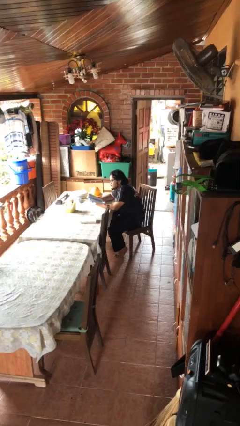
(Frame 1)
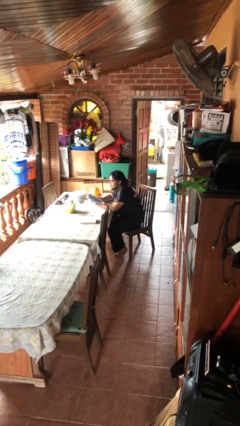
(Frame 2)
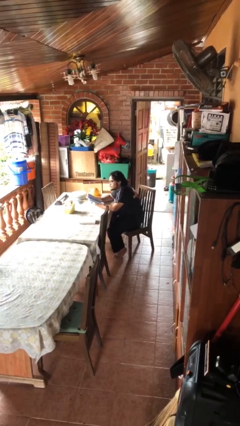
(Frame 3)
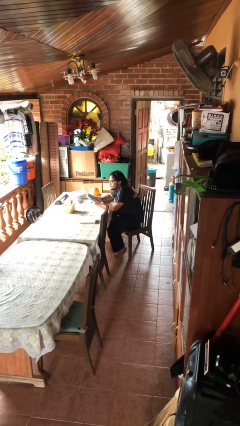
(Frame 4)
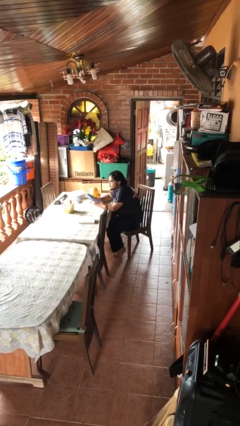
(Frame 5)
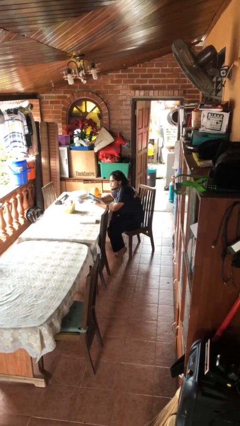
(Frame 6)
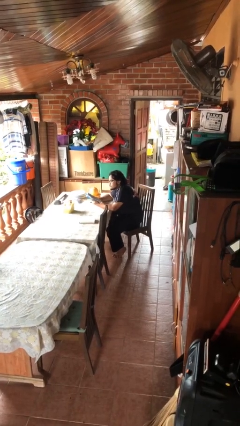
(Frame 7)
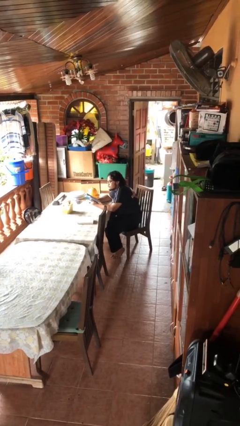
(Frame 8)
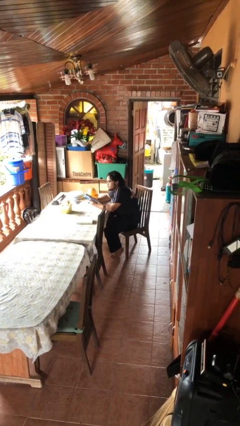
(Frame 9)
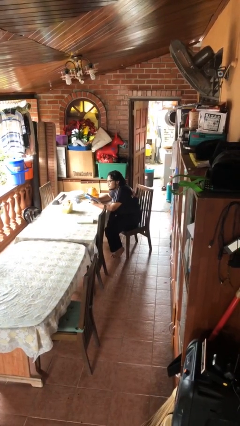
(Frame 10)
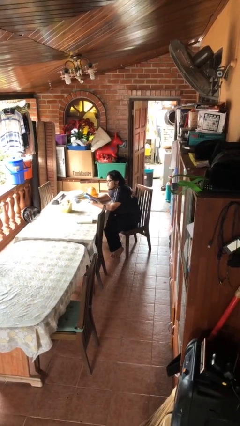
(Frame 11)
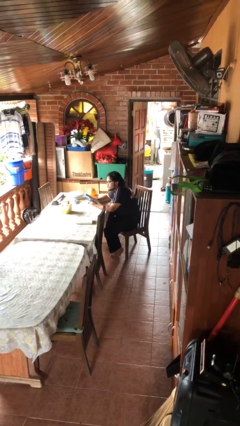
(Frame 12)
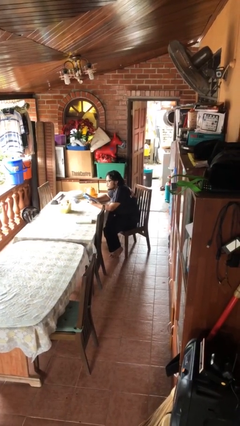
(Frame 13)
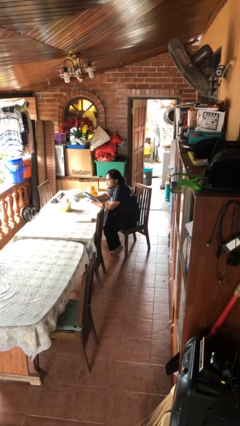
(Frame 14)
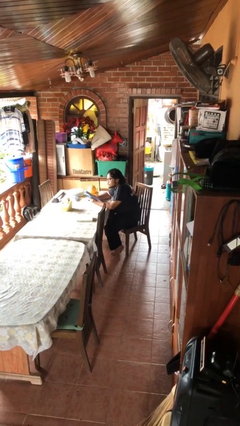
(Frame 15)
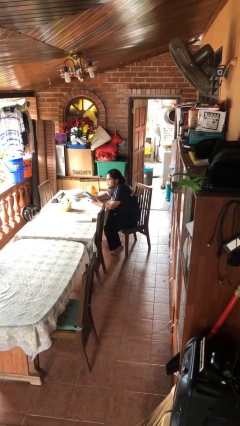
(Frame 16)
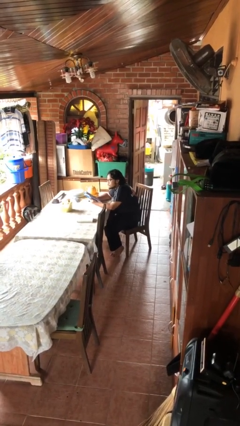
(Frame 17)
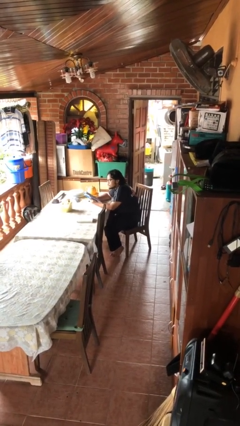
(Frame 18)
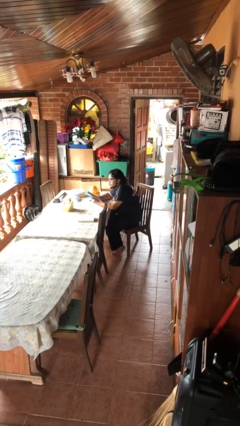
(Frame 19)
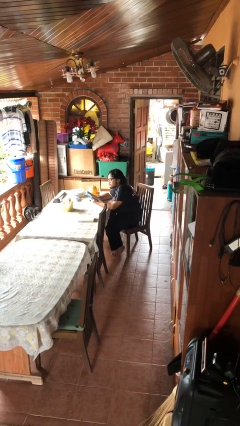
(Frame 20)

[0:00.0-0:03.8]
person reads document

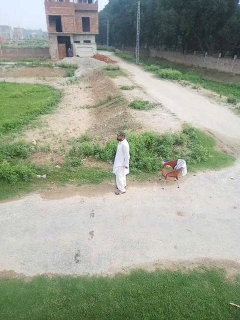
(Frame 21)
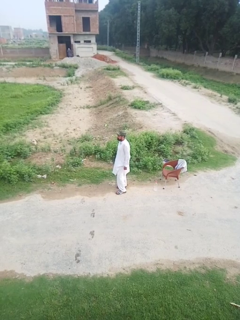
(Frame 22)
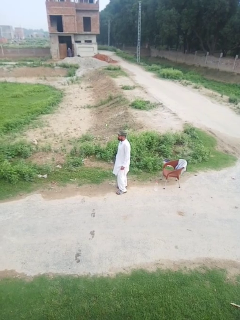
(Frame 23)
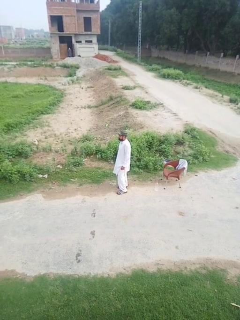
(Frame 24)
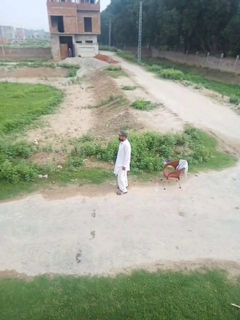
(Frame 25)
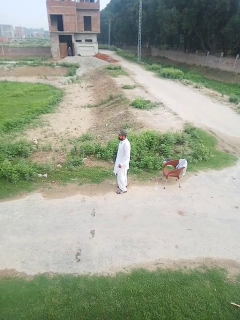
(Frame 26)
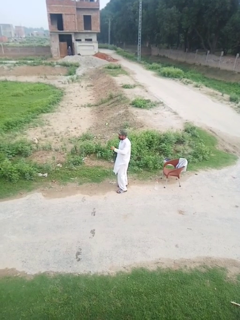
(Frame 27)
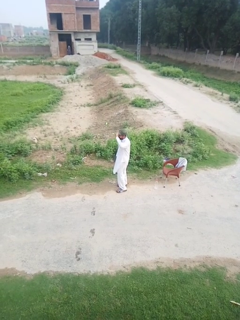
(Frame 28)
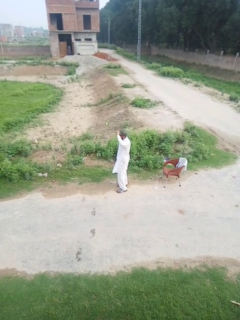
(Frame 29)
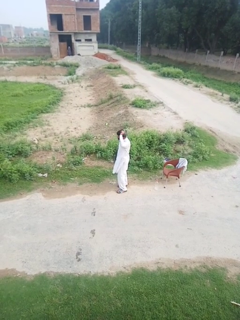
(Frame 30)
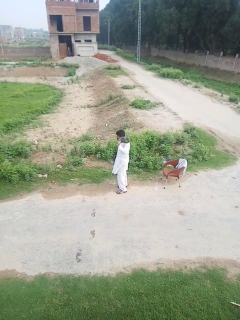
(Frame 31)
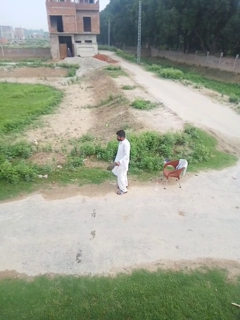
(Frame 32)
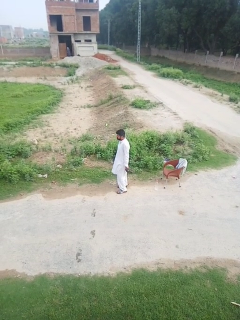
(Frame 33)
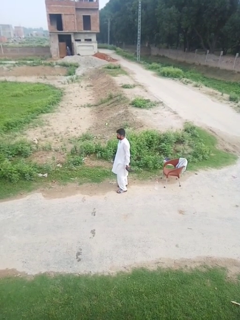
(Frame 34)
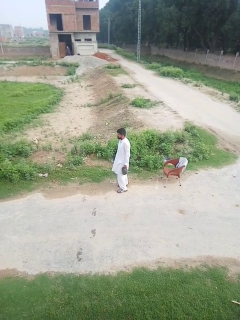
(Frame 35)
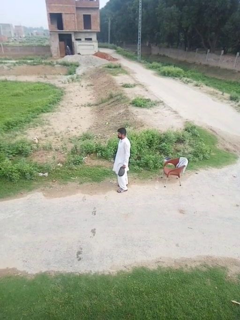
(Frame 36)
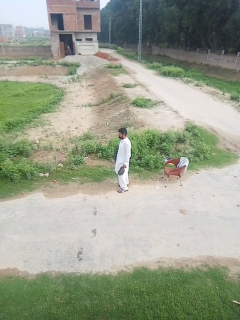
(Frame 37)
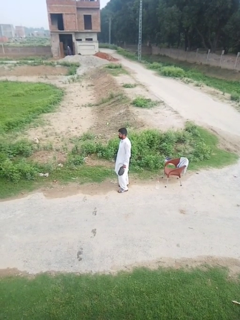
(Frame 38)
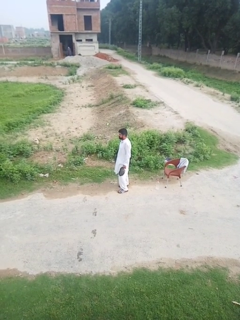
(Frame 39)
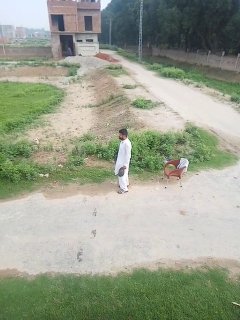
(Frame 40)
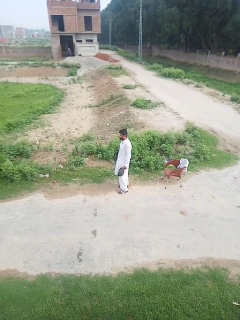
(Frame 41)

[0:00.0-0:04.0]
person takes off hat

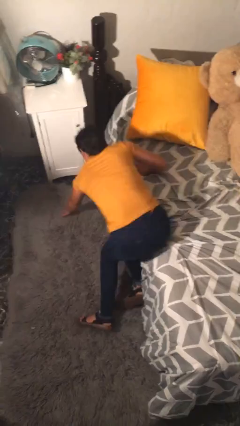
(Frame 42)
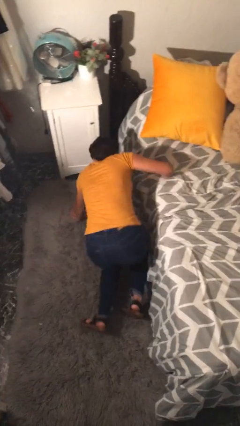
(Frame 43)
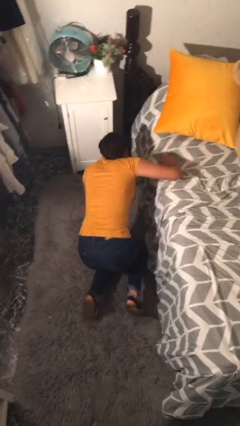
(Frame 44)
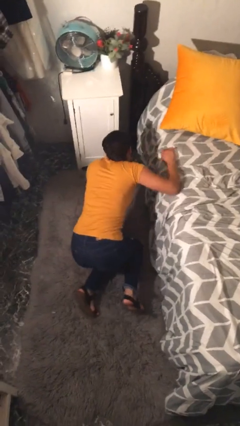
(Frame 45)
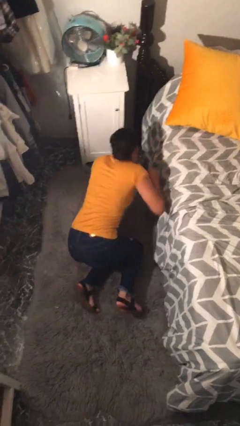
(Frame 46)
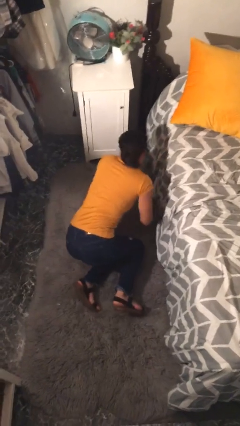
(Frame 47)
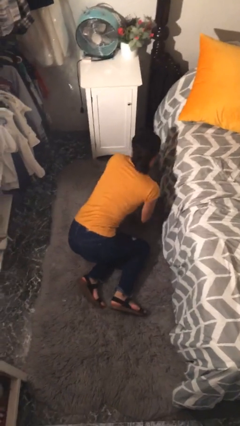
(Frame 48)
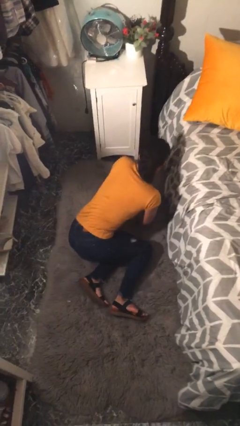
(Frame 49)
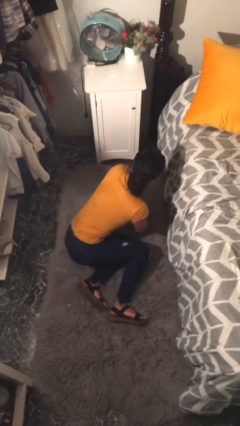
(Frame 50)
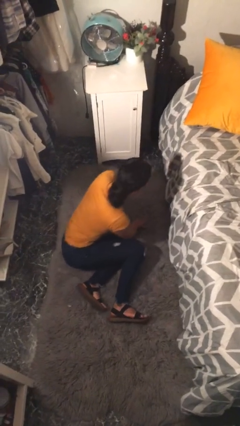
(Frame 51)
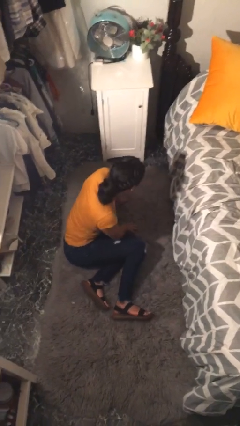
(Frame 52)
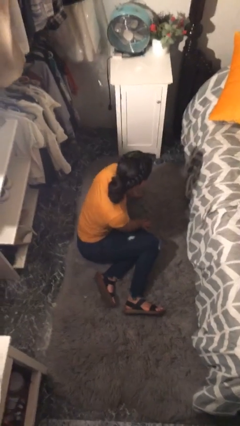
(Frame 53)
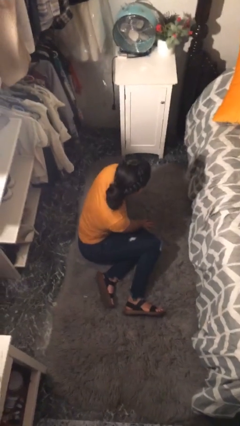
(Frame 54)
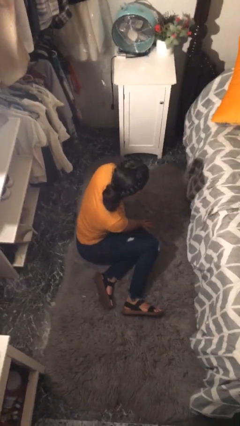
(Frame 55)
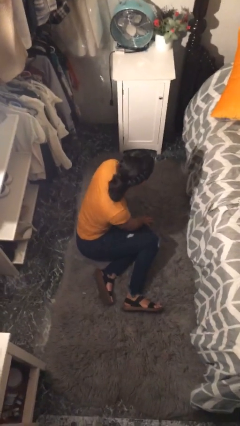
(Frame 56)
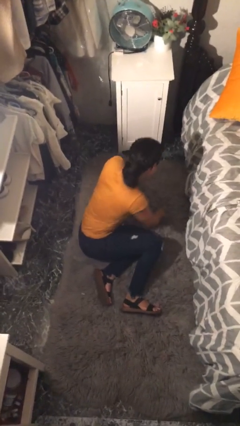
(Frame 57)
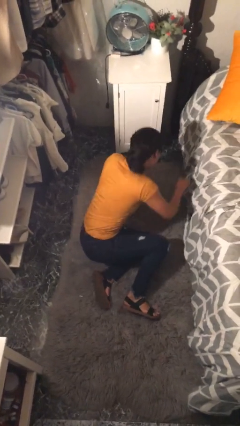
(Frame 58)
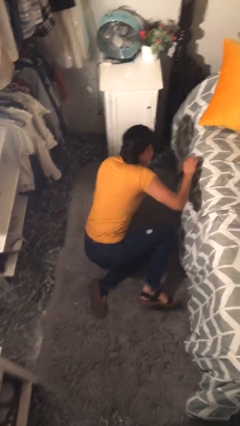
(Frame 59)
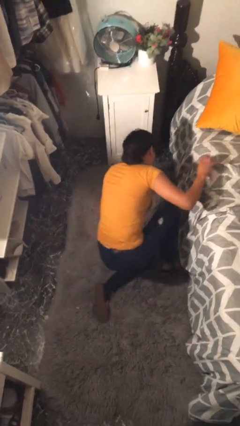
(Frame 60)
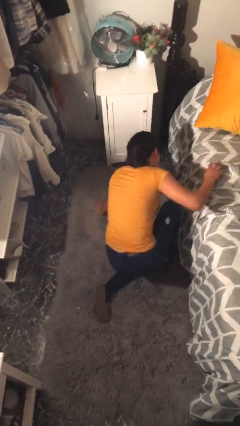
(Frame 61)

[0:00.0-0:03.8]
person falls from bed

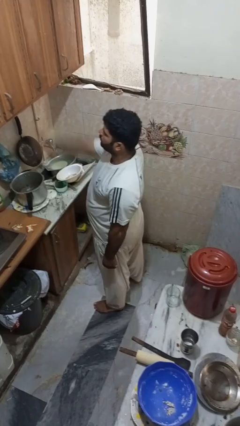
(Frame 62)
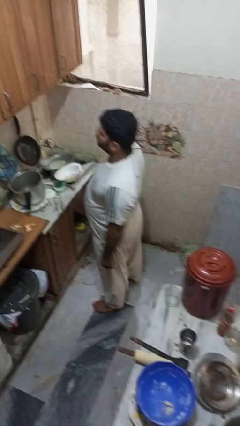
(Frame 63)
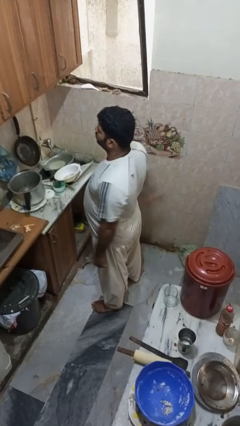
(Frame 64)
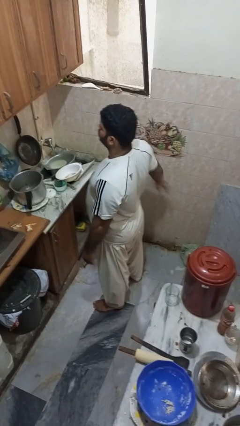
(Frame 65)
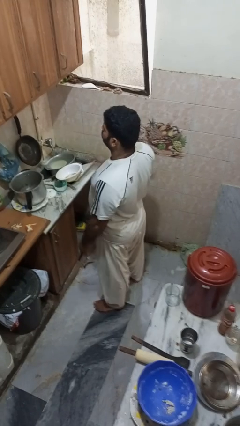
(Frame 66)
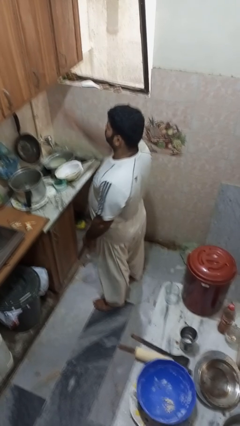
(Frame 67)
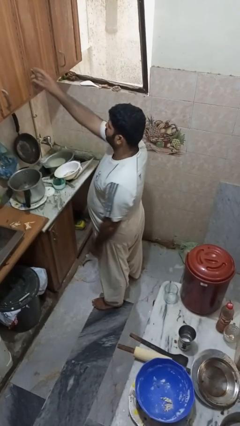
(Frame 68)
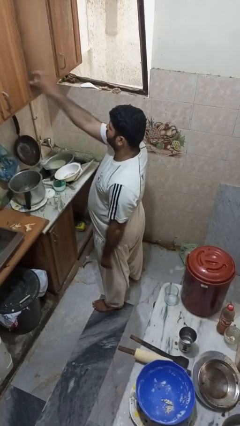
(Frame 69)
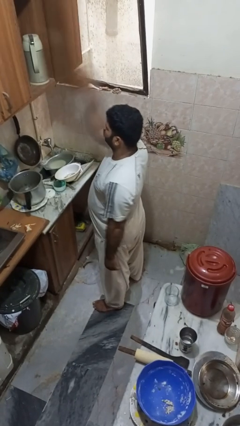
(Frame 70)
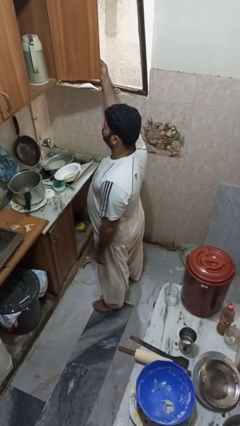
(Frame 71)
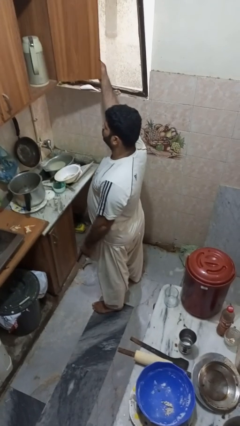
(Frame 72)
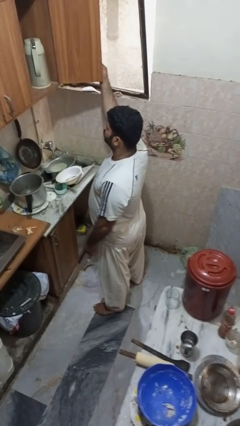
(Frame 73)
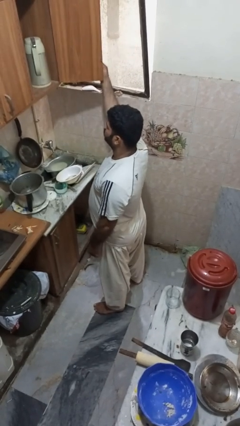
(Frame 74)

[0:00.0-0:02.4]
person opens cabinet

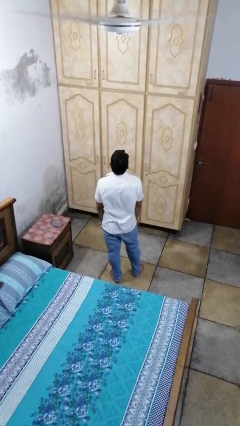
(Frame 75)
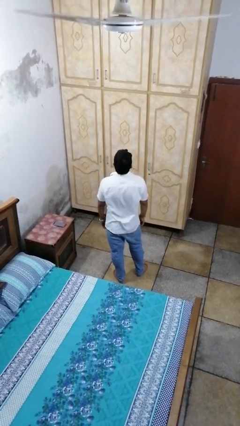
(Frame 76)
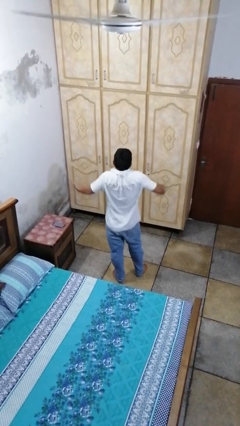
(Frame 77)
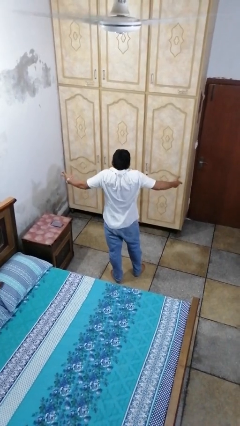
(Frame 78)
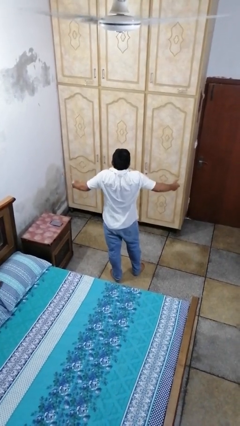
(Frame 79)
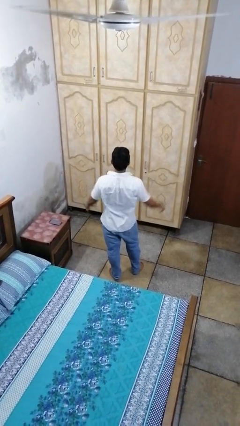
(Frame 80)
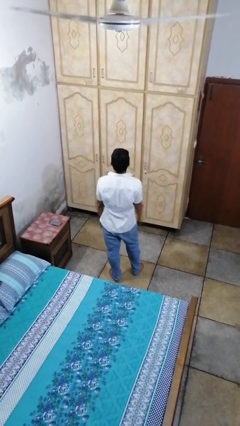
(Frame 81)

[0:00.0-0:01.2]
person shrugs

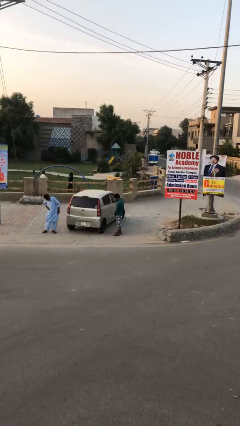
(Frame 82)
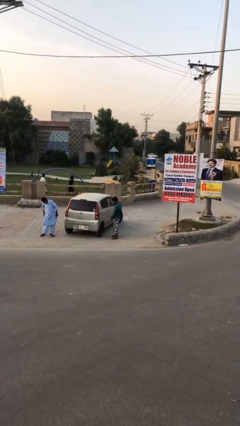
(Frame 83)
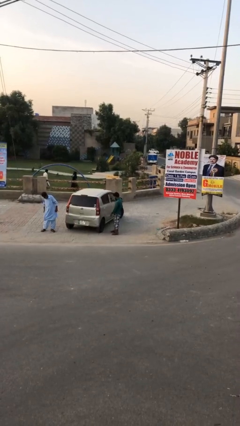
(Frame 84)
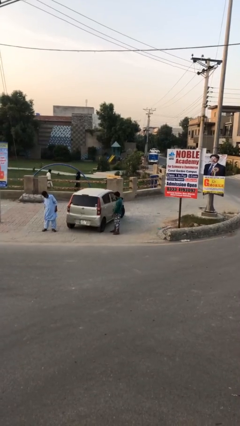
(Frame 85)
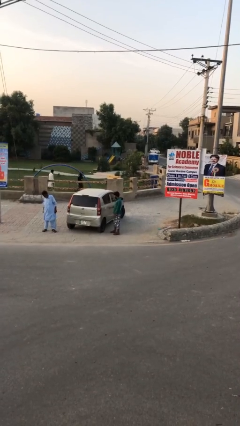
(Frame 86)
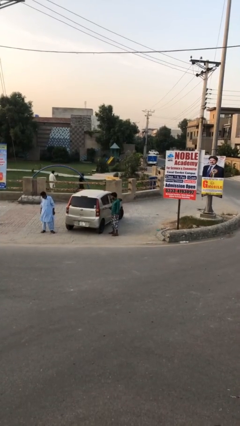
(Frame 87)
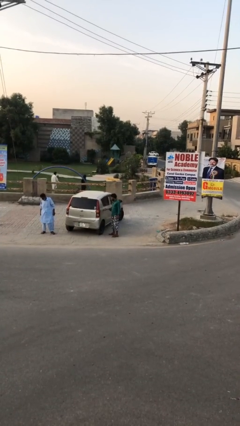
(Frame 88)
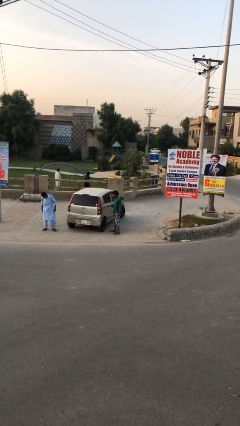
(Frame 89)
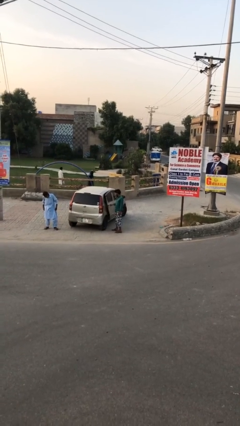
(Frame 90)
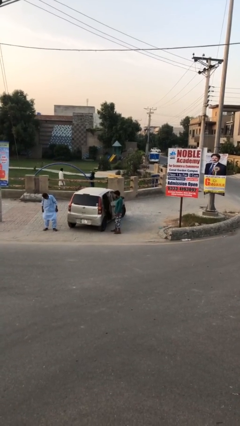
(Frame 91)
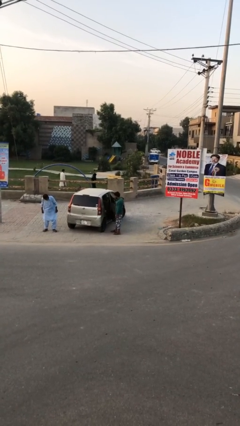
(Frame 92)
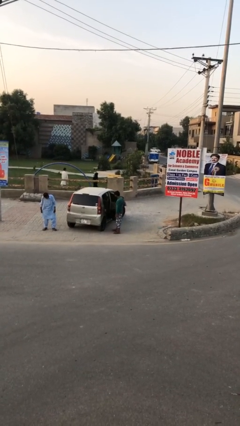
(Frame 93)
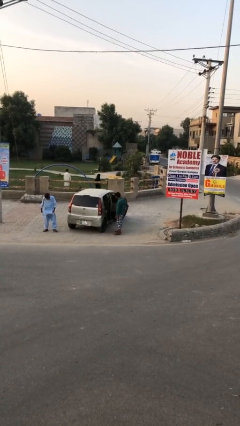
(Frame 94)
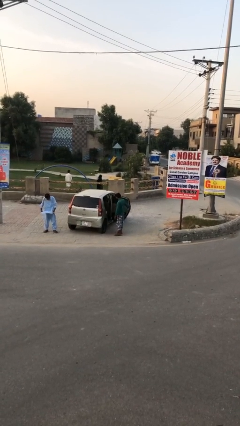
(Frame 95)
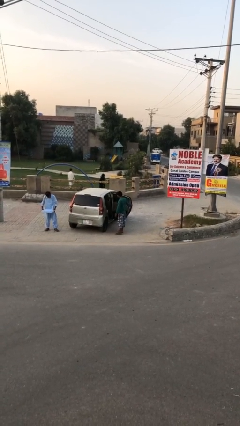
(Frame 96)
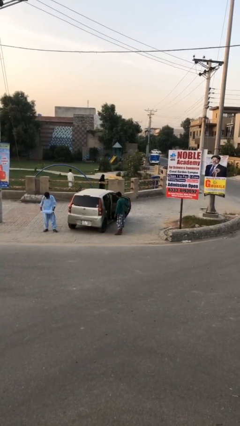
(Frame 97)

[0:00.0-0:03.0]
person opens car door
